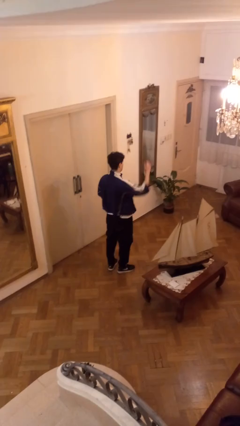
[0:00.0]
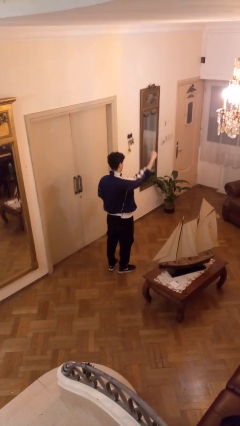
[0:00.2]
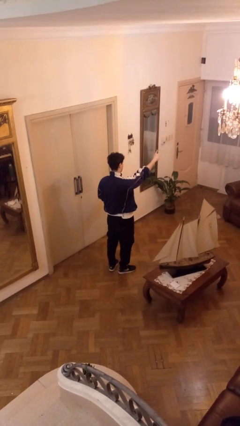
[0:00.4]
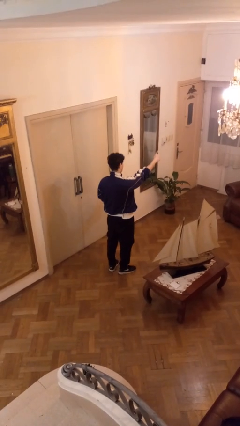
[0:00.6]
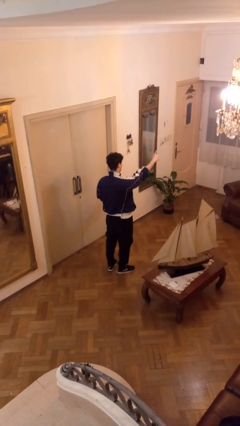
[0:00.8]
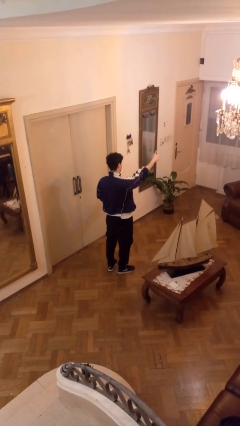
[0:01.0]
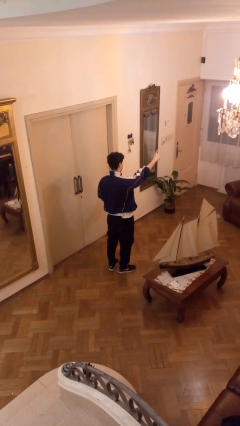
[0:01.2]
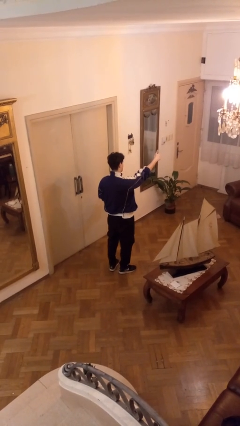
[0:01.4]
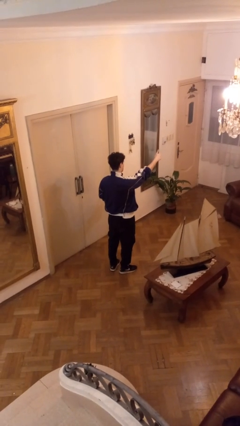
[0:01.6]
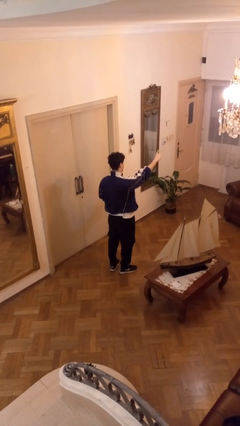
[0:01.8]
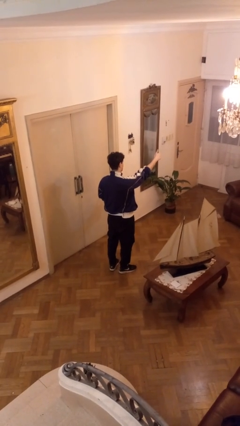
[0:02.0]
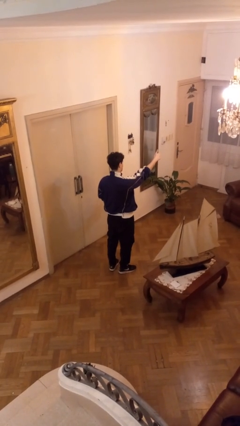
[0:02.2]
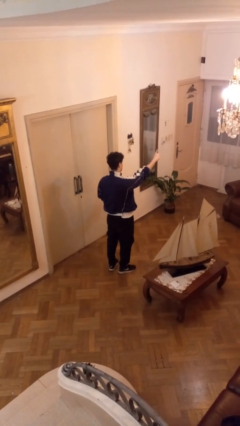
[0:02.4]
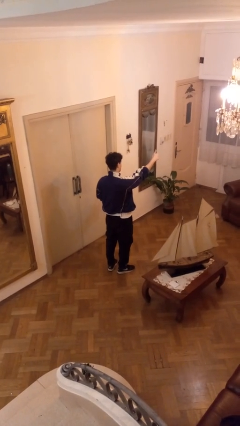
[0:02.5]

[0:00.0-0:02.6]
person gestures thumbs up

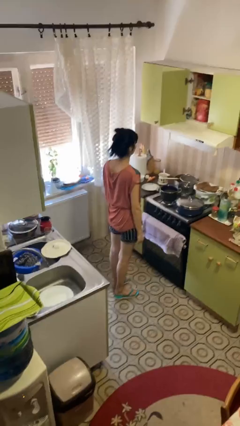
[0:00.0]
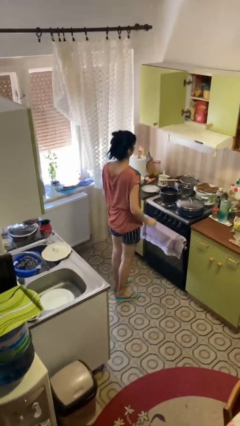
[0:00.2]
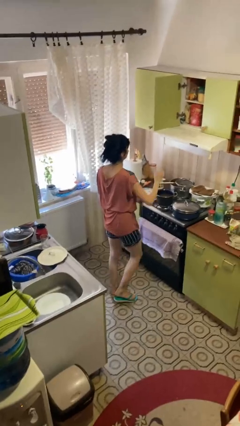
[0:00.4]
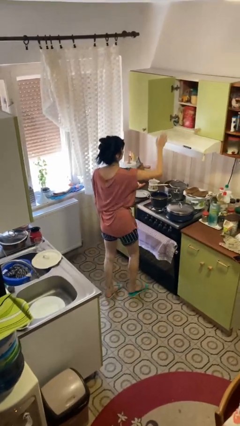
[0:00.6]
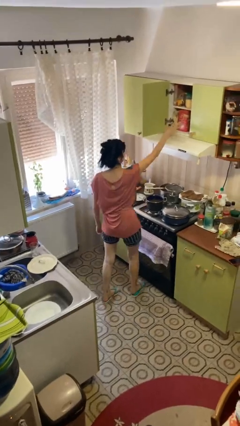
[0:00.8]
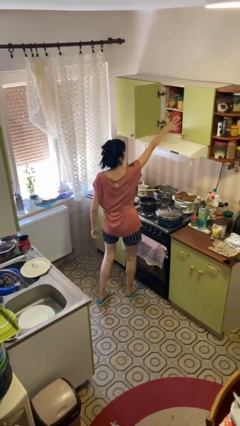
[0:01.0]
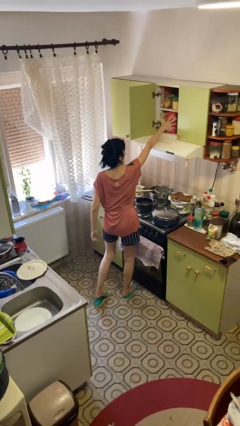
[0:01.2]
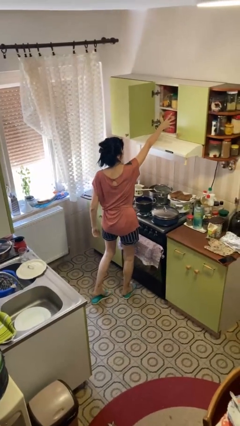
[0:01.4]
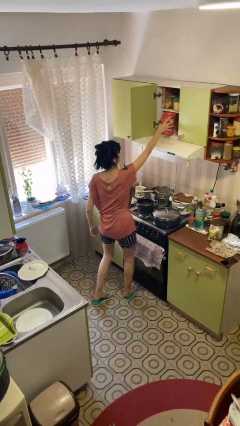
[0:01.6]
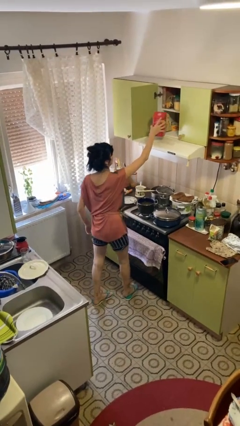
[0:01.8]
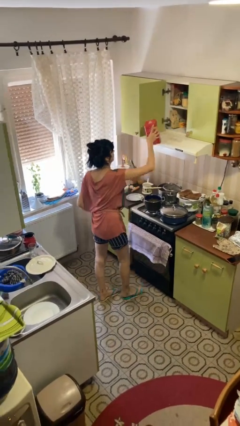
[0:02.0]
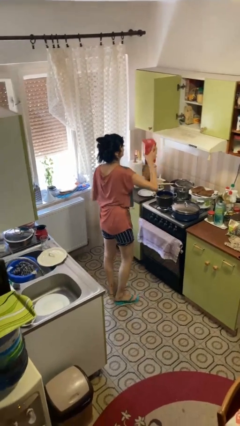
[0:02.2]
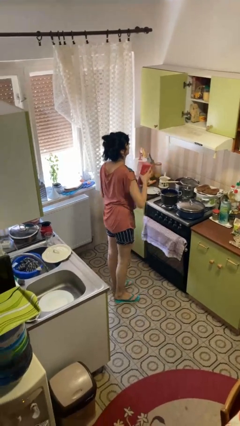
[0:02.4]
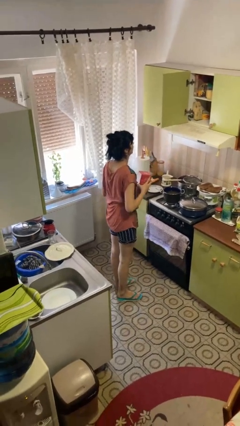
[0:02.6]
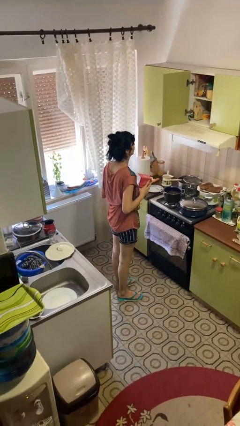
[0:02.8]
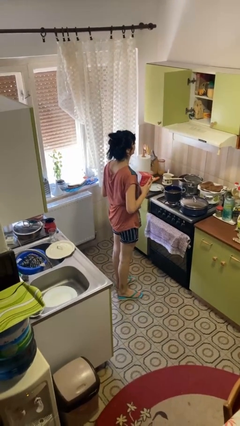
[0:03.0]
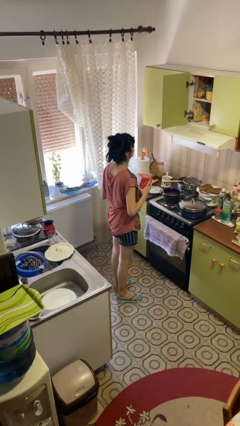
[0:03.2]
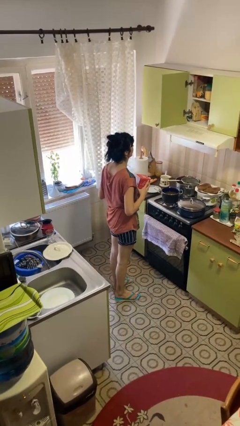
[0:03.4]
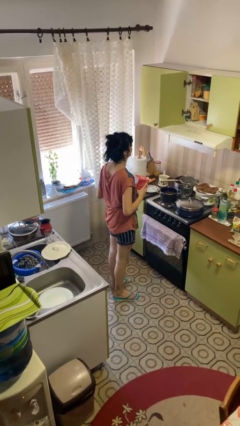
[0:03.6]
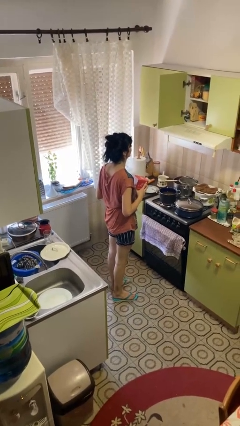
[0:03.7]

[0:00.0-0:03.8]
person picks up object from cabinet

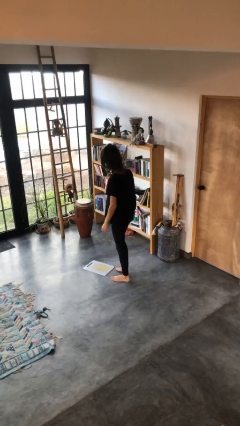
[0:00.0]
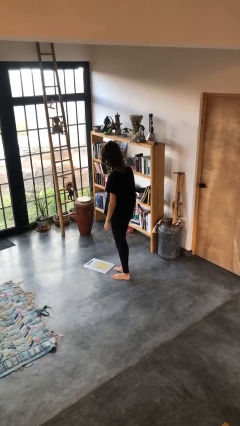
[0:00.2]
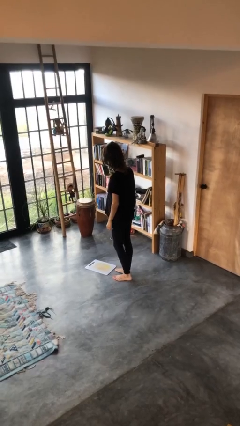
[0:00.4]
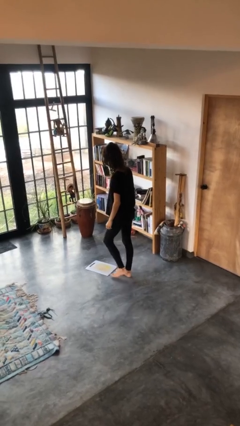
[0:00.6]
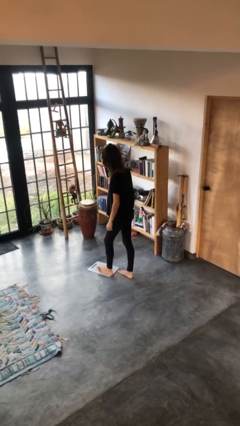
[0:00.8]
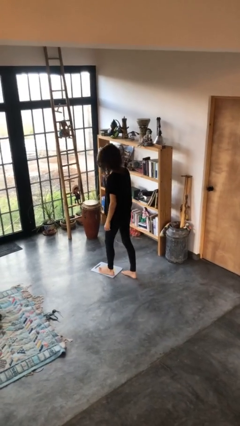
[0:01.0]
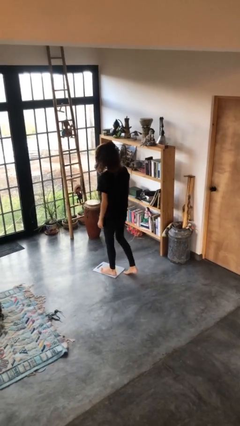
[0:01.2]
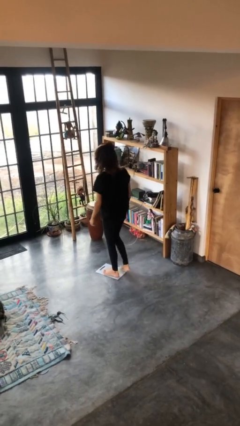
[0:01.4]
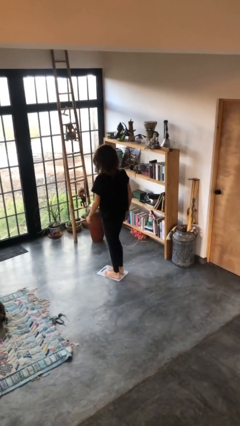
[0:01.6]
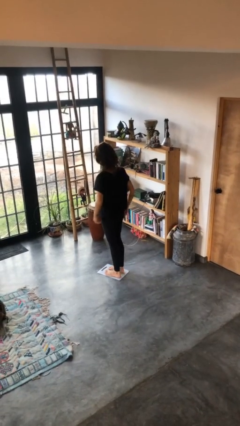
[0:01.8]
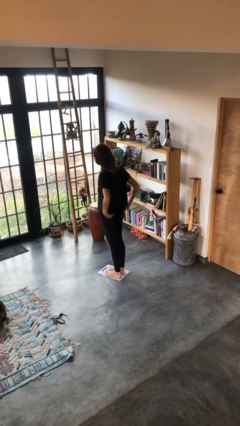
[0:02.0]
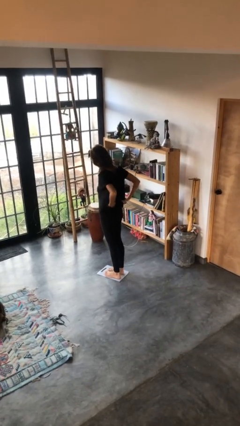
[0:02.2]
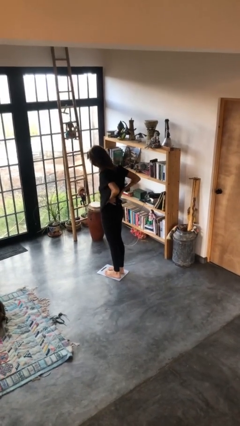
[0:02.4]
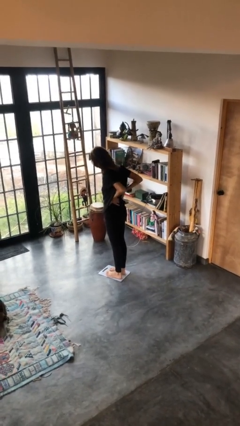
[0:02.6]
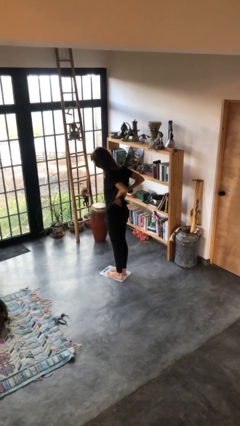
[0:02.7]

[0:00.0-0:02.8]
person uses bodyweight scale

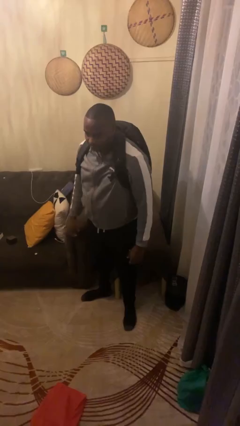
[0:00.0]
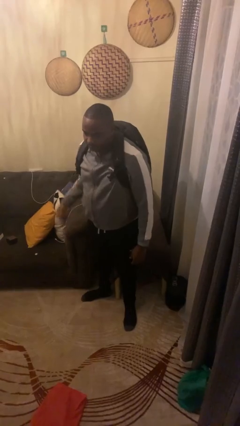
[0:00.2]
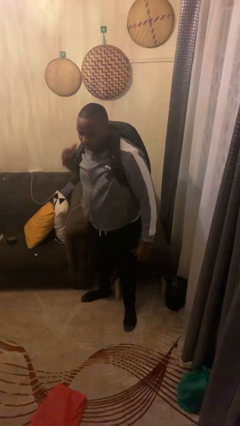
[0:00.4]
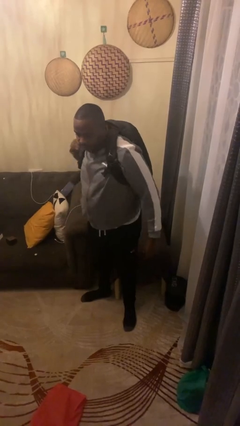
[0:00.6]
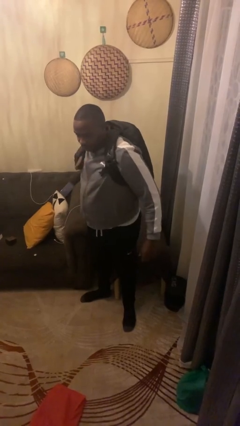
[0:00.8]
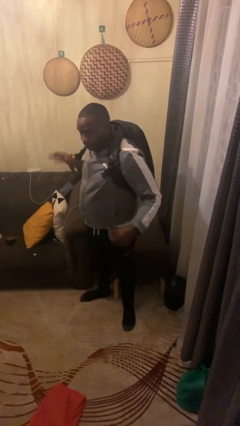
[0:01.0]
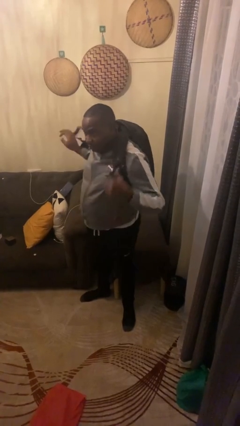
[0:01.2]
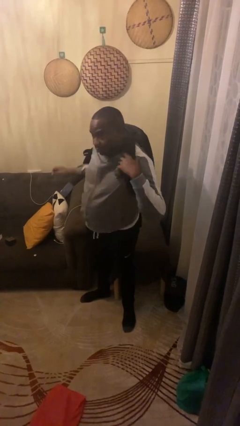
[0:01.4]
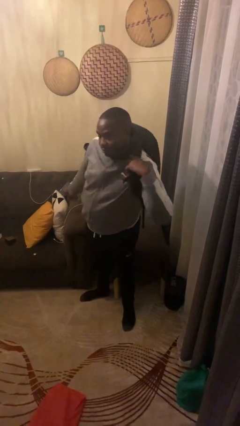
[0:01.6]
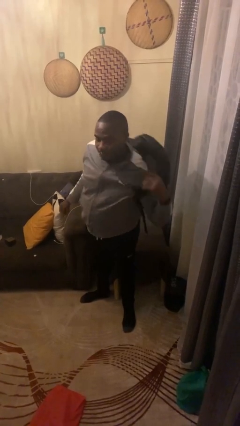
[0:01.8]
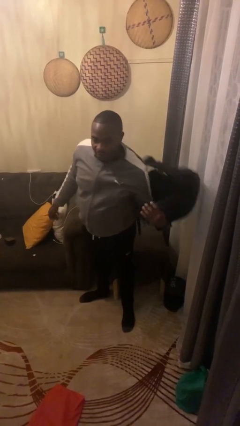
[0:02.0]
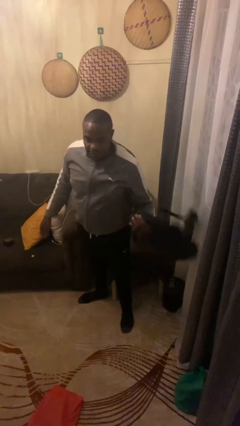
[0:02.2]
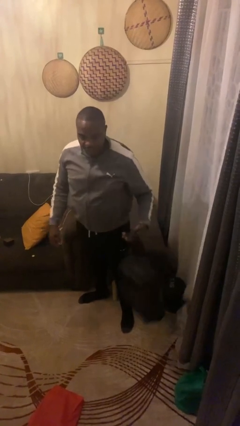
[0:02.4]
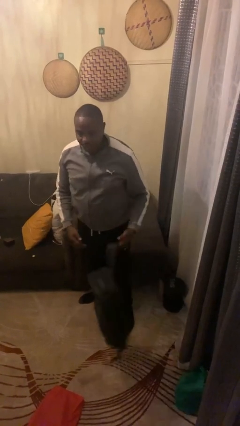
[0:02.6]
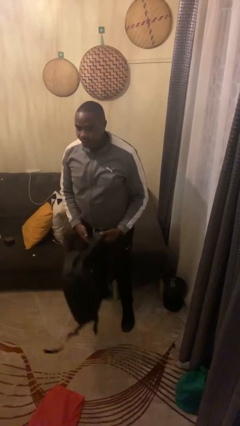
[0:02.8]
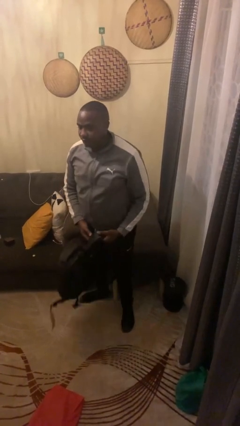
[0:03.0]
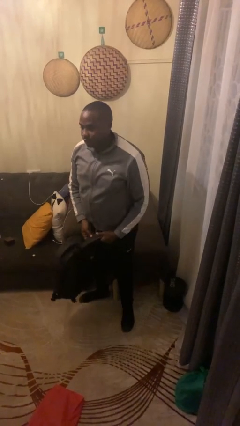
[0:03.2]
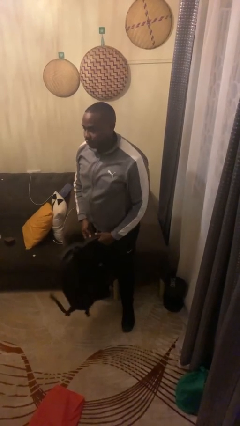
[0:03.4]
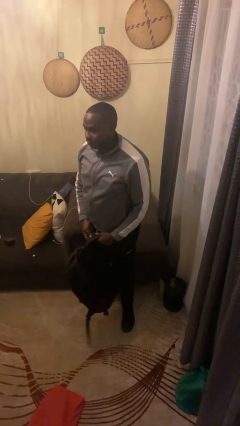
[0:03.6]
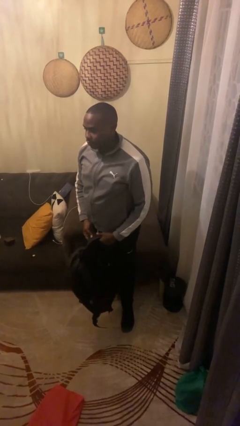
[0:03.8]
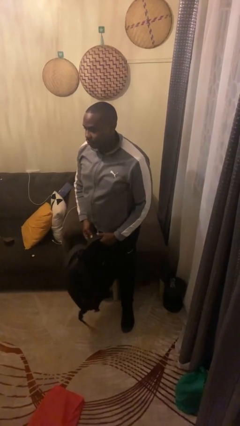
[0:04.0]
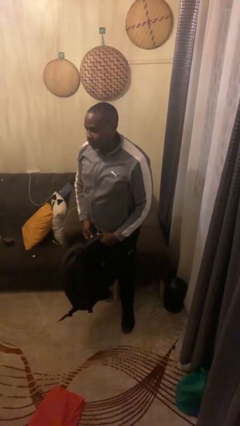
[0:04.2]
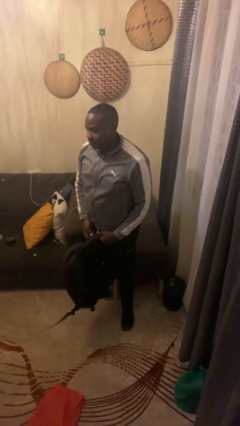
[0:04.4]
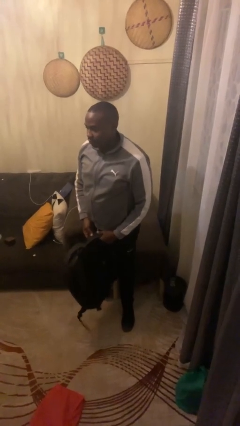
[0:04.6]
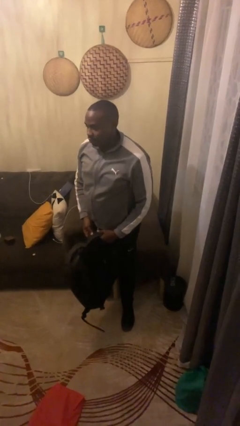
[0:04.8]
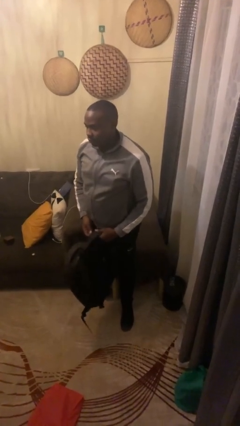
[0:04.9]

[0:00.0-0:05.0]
person takes off backpack

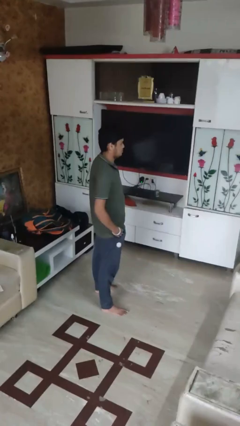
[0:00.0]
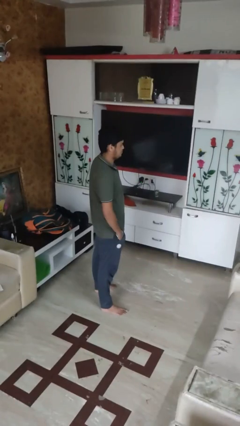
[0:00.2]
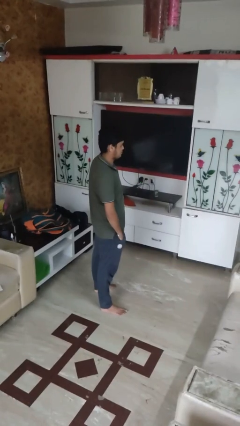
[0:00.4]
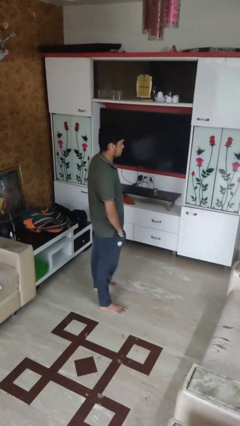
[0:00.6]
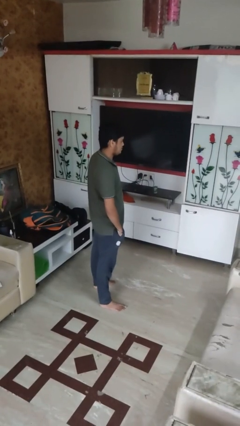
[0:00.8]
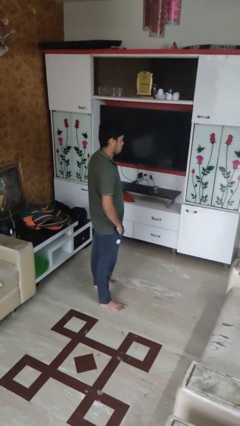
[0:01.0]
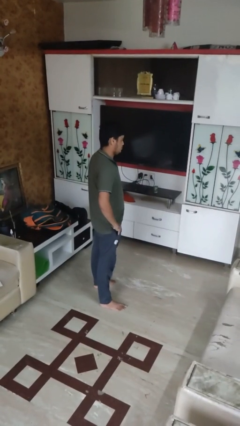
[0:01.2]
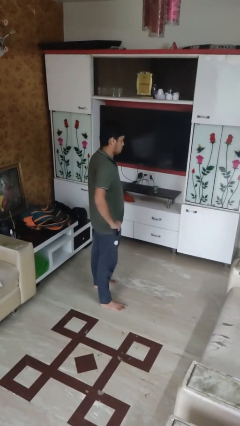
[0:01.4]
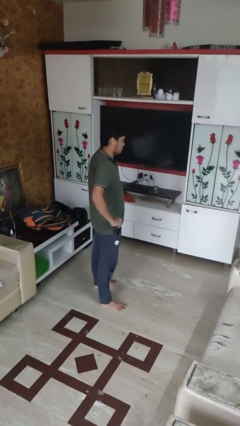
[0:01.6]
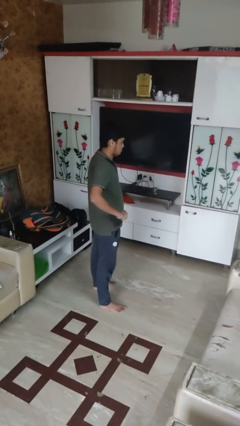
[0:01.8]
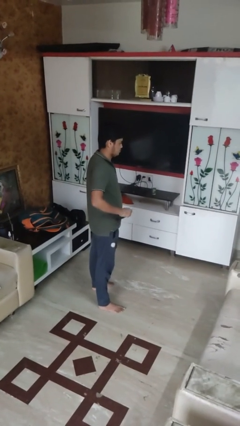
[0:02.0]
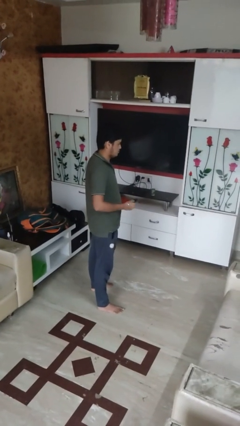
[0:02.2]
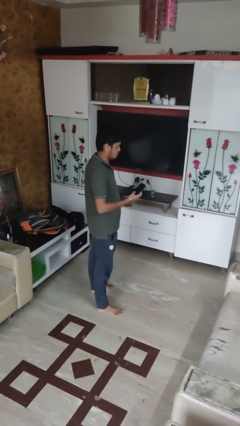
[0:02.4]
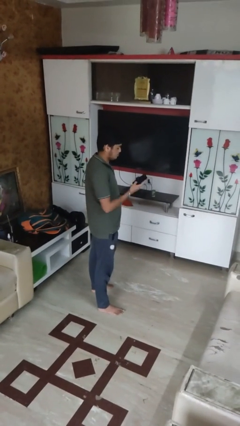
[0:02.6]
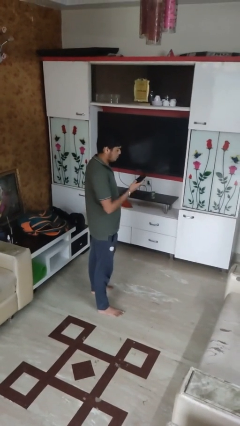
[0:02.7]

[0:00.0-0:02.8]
person takes phone from pocket

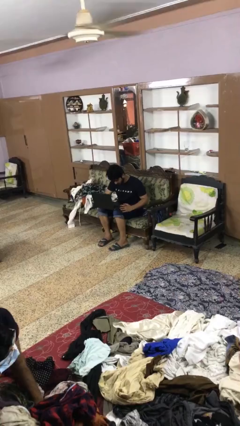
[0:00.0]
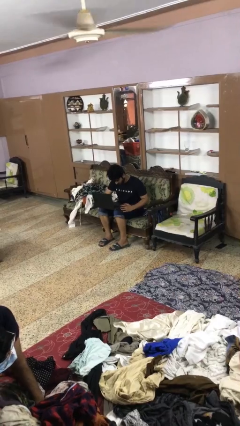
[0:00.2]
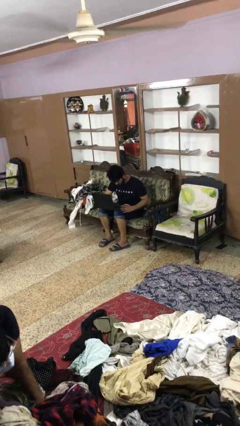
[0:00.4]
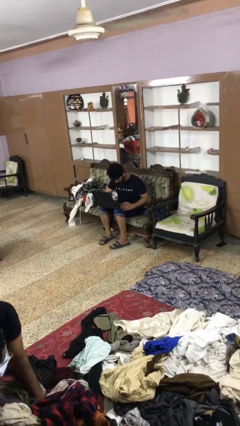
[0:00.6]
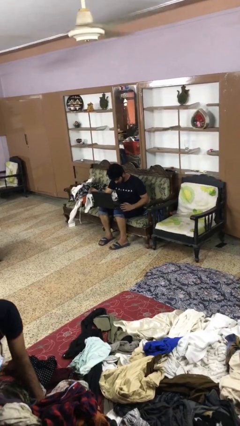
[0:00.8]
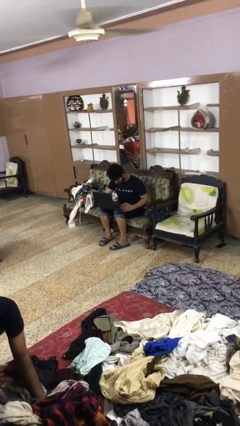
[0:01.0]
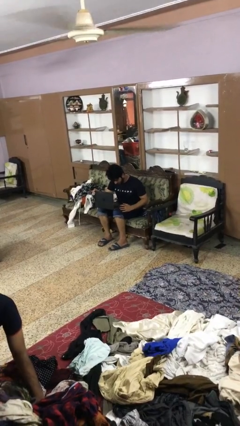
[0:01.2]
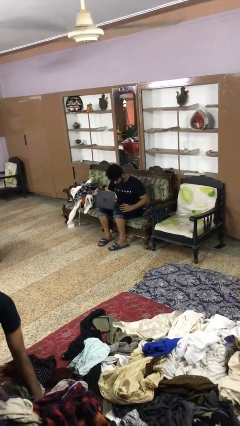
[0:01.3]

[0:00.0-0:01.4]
person closes laptop
